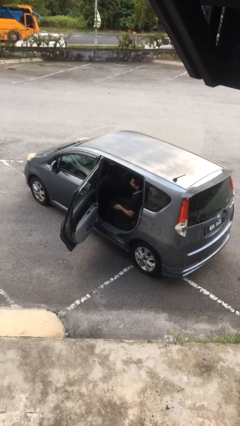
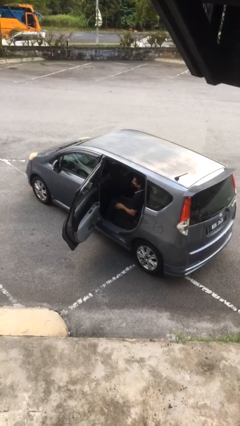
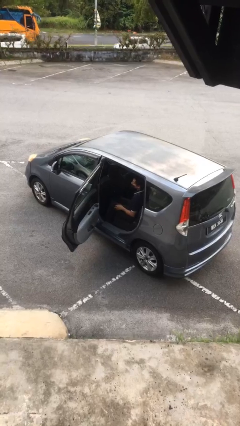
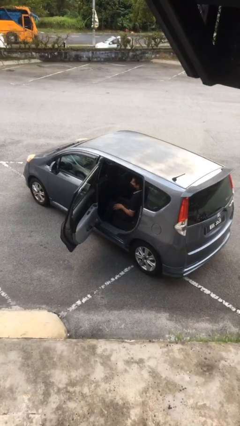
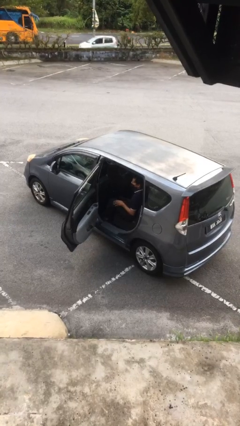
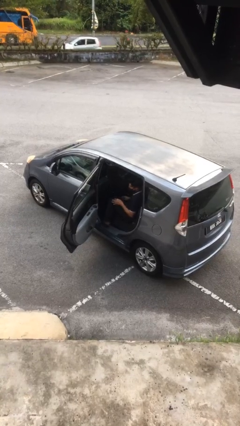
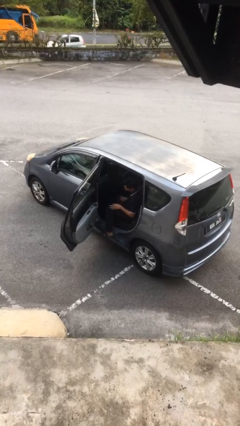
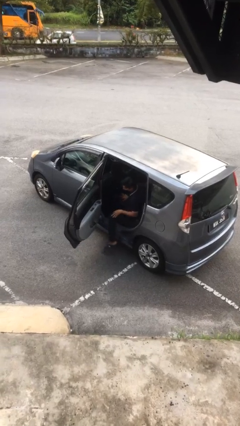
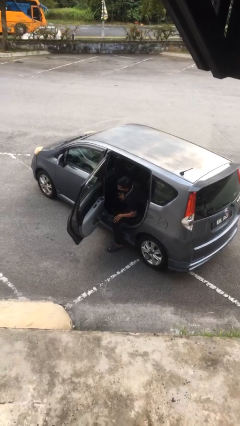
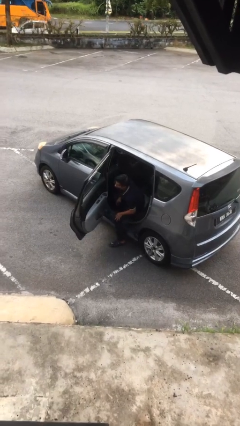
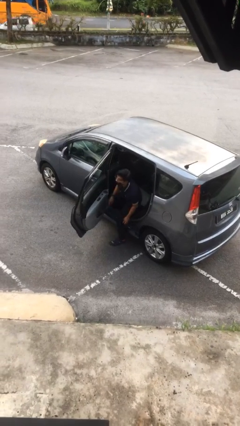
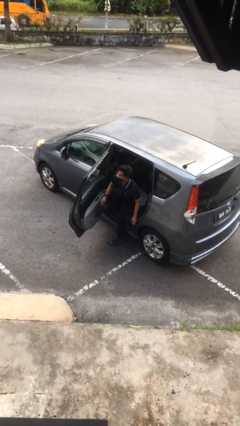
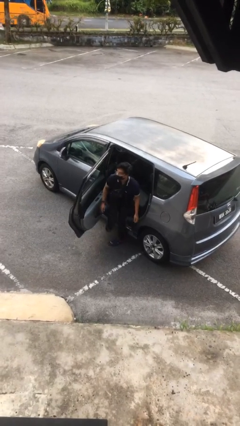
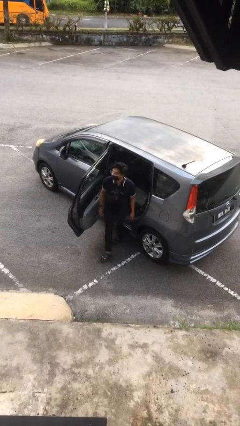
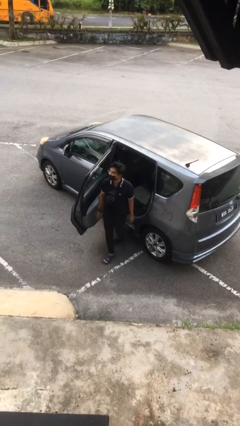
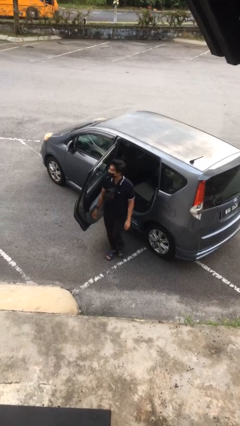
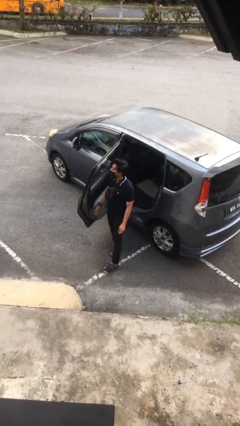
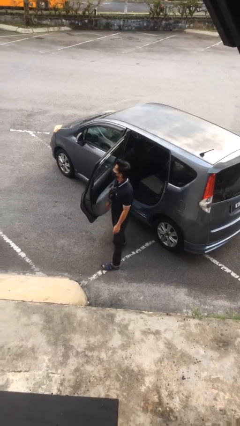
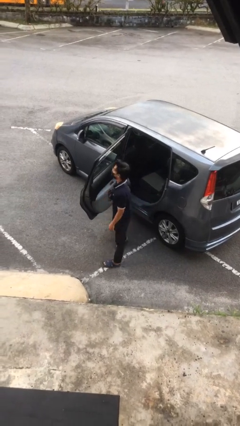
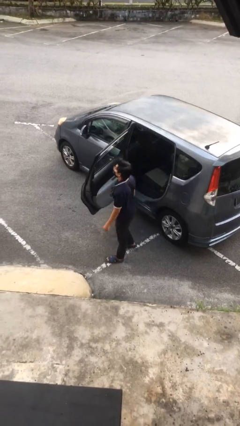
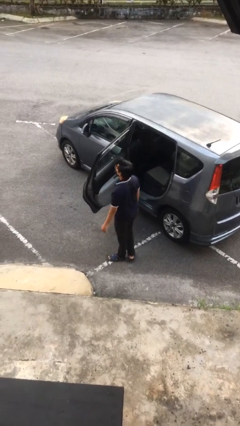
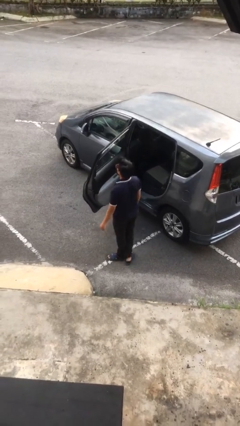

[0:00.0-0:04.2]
person exits car

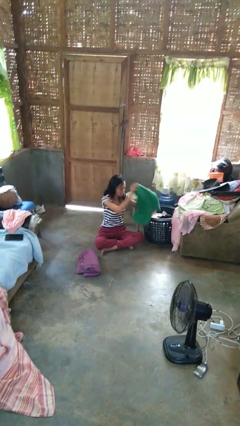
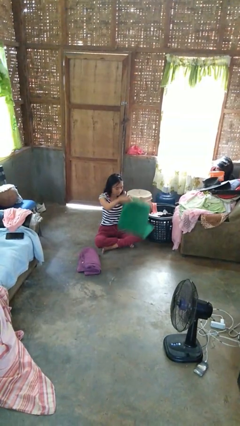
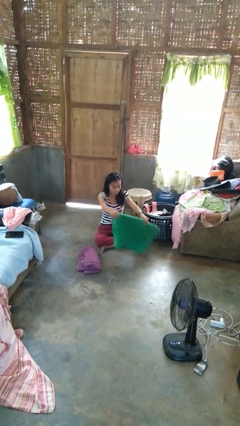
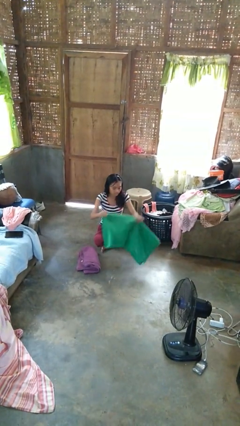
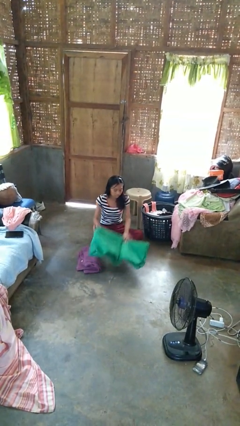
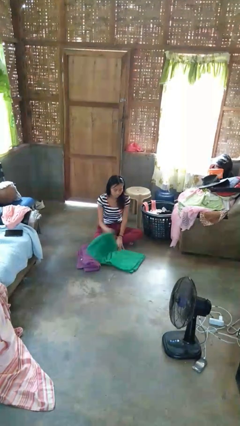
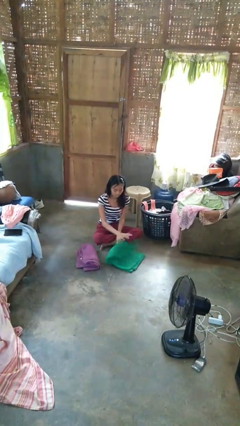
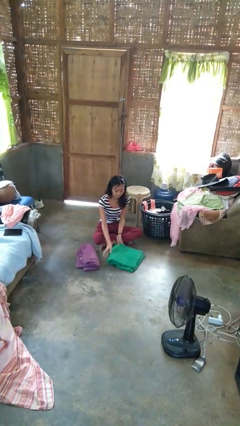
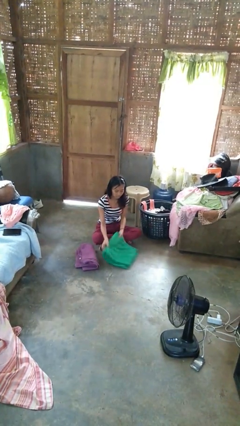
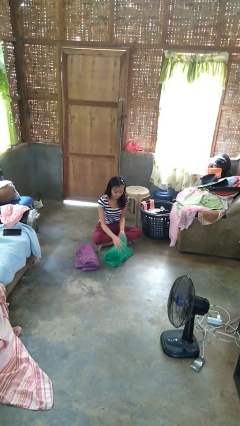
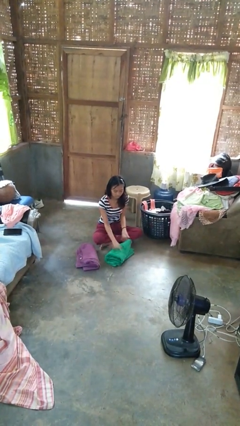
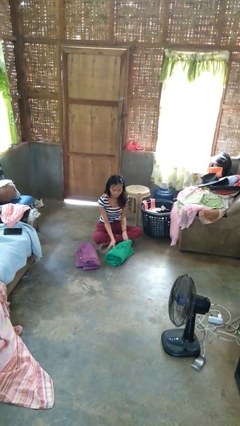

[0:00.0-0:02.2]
person folds towel

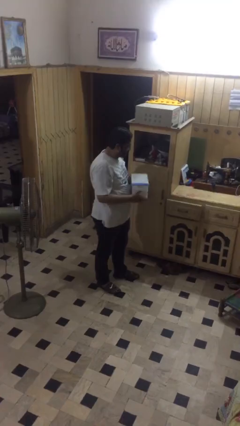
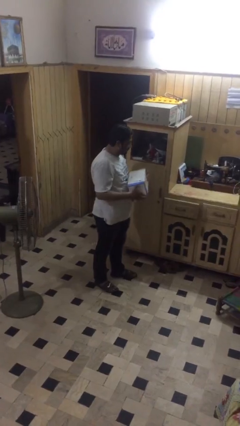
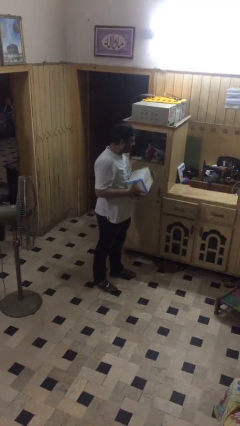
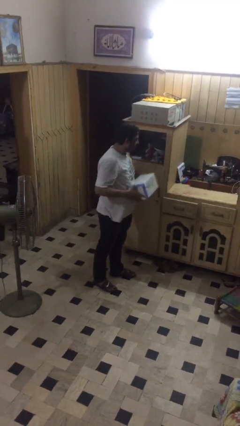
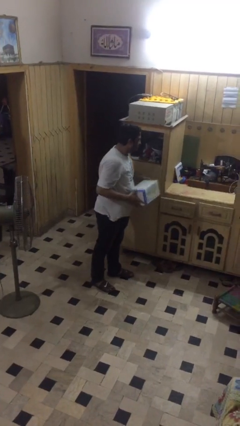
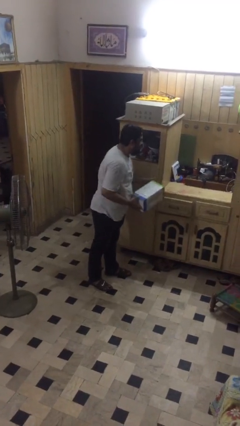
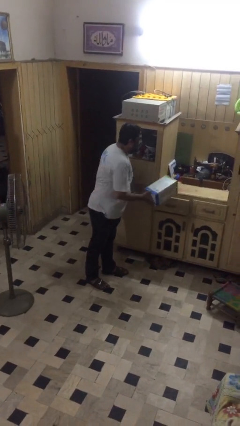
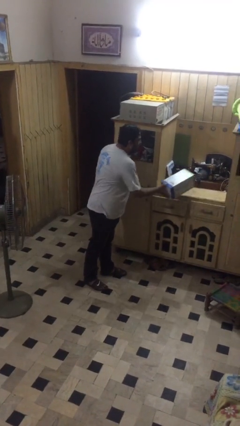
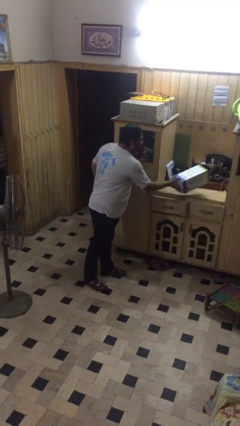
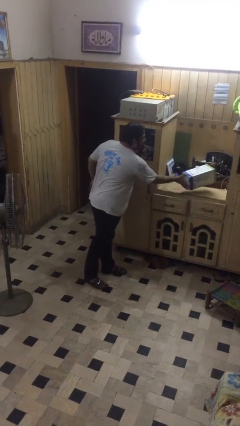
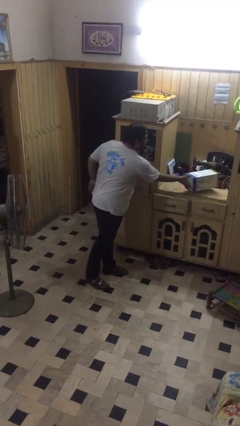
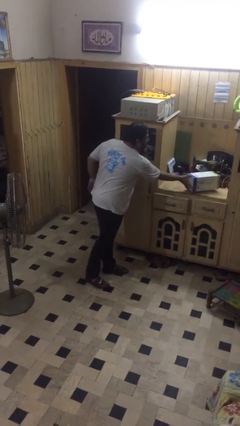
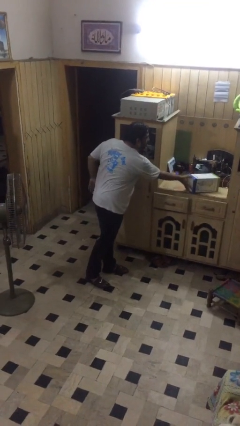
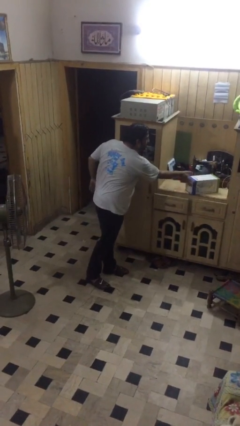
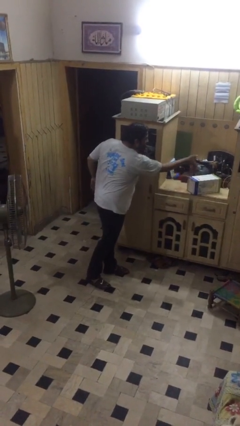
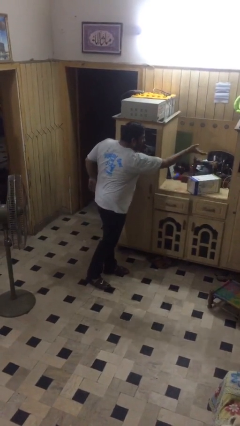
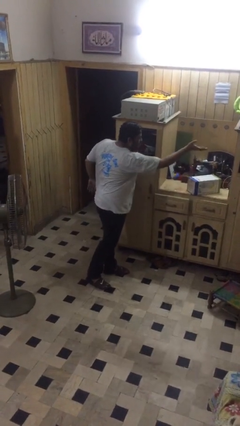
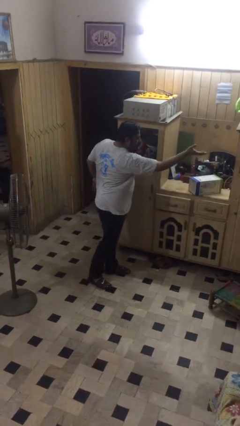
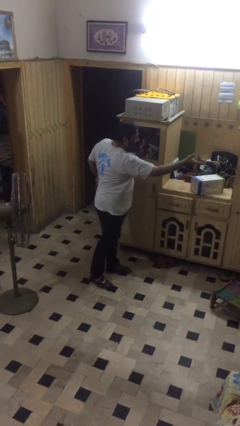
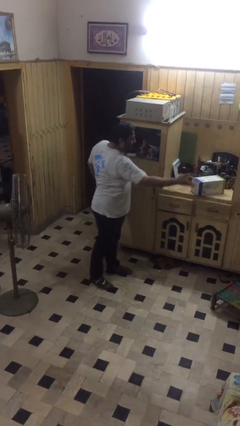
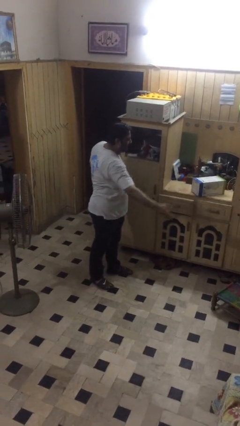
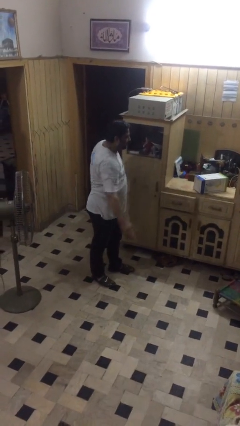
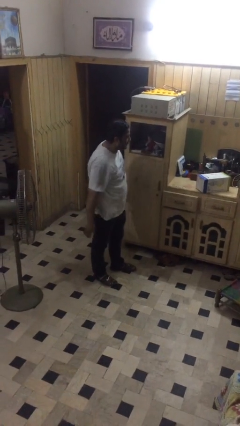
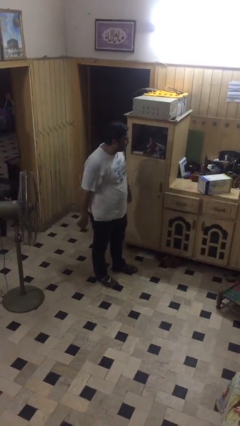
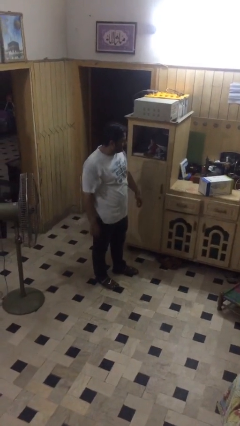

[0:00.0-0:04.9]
person puts down object on table

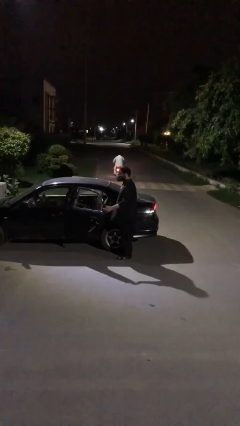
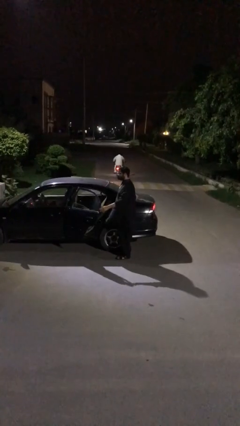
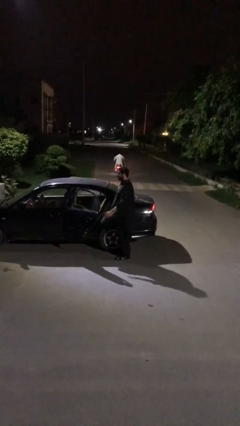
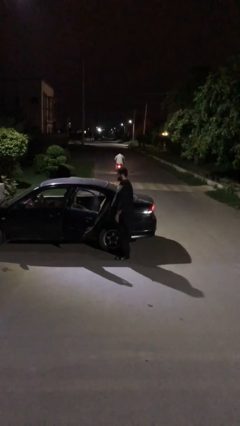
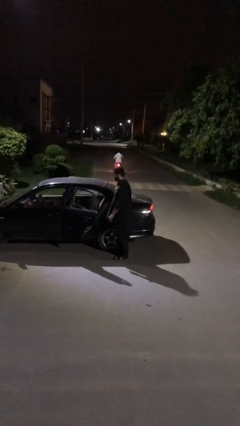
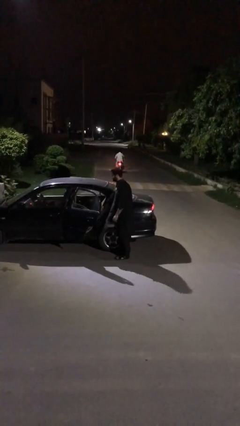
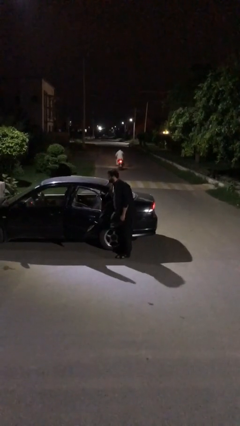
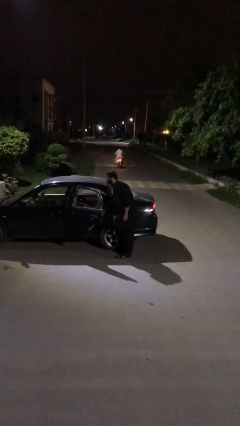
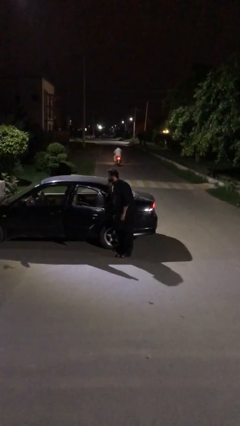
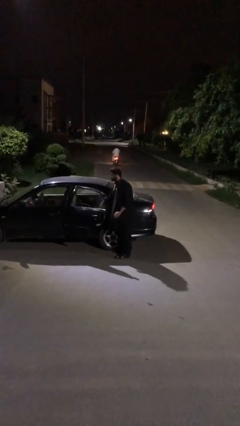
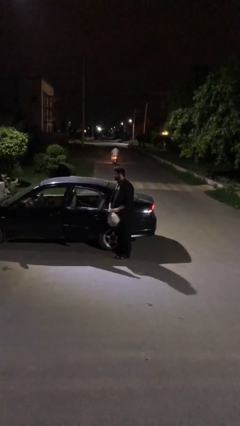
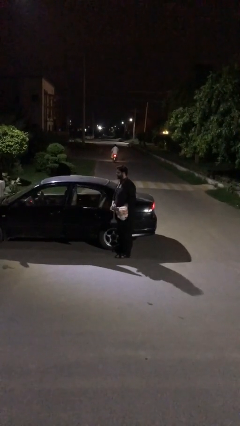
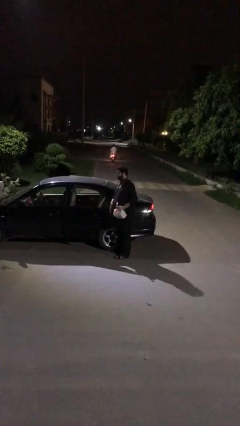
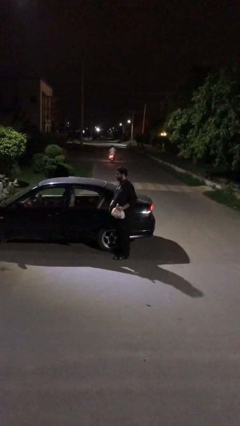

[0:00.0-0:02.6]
person unloads car

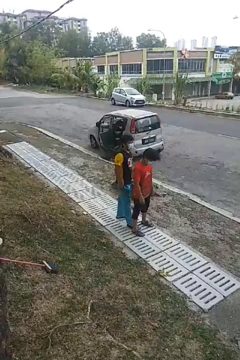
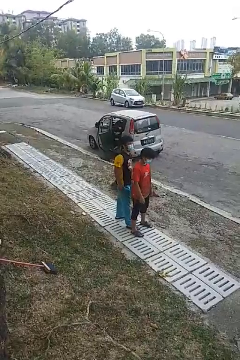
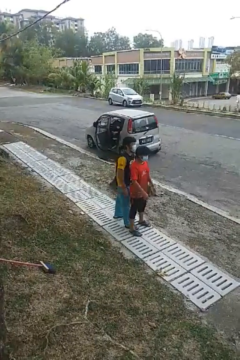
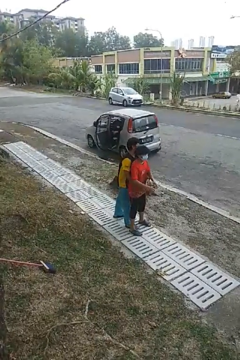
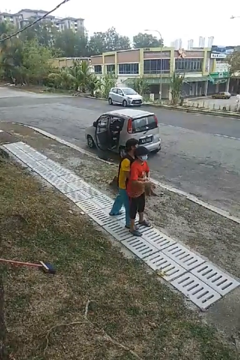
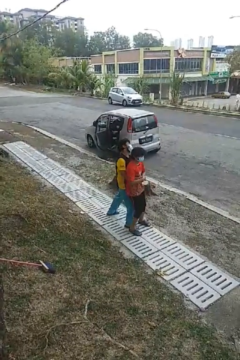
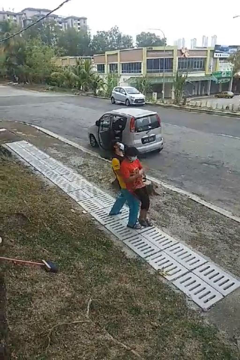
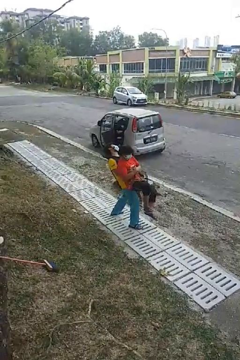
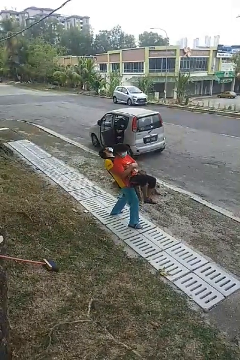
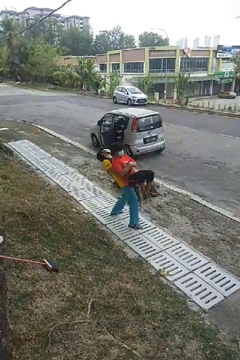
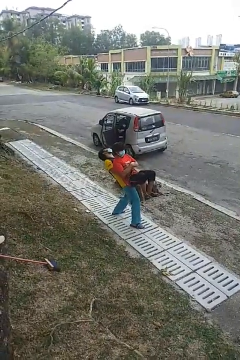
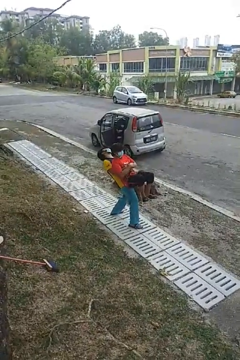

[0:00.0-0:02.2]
person picks up person

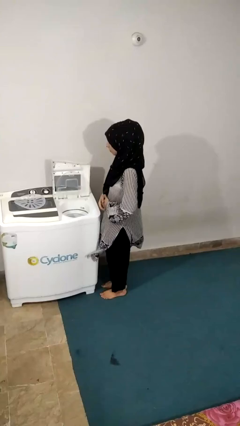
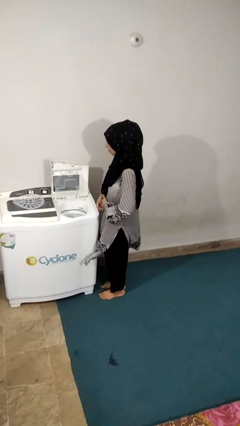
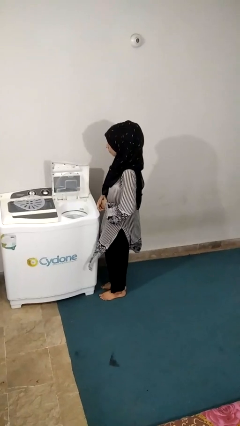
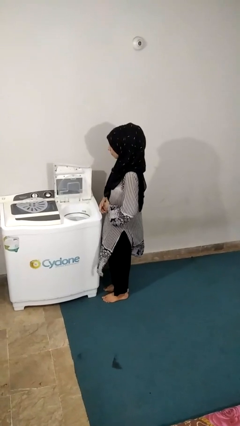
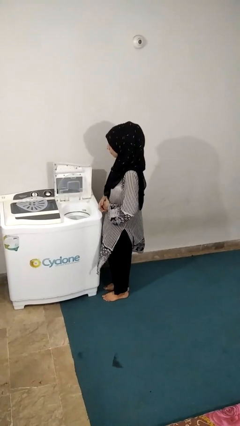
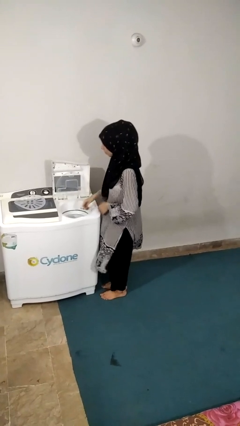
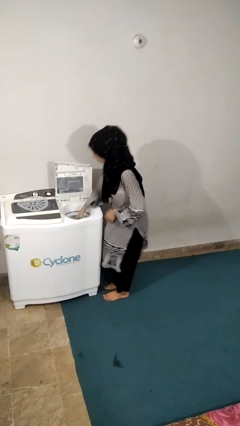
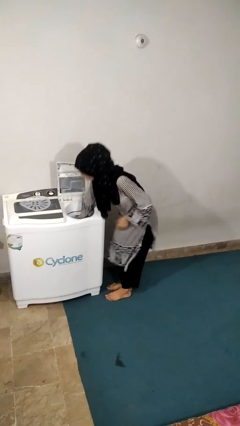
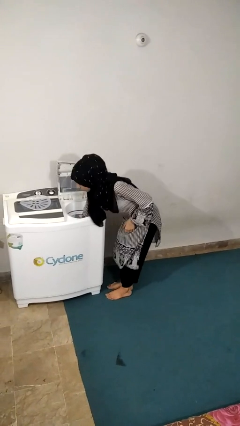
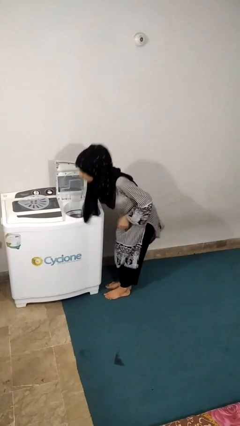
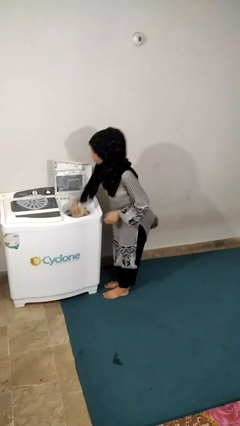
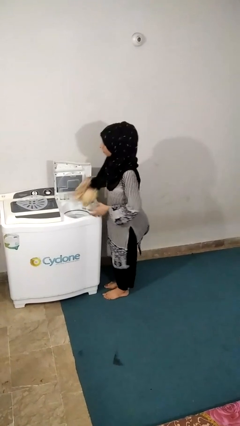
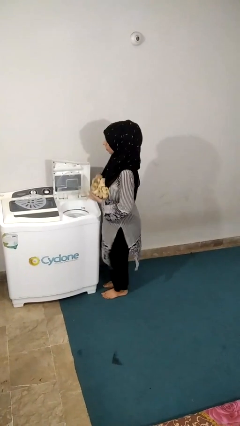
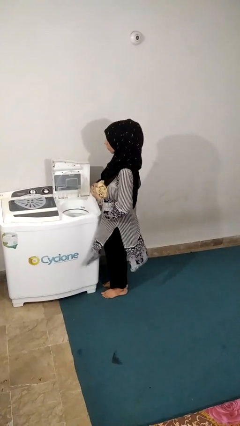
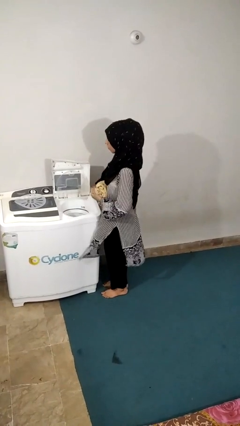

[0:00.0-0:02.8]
person unloads dryer
